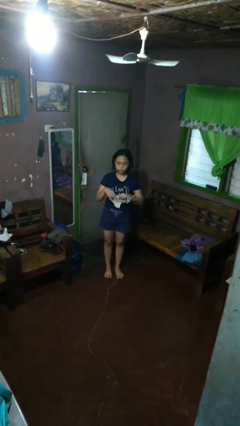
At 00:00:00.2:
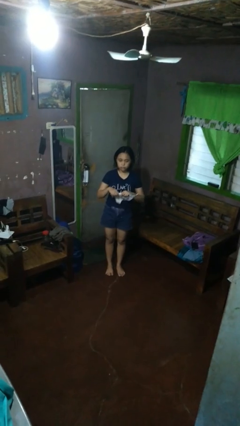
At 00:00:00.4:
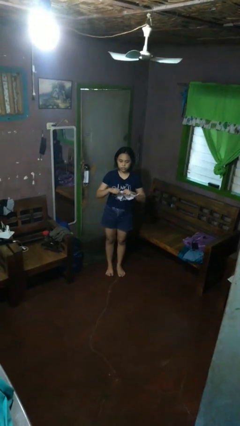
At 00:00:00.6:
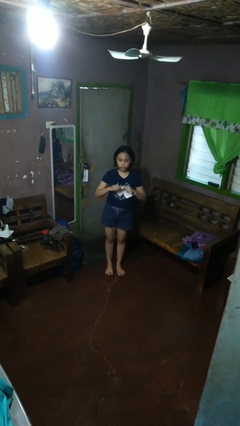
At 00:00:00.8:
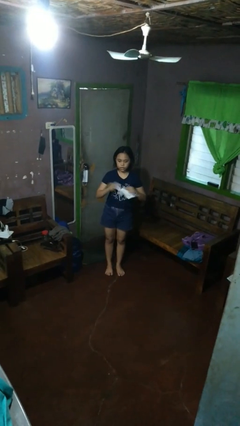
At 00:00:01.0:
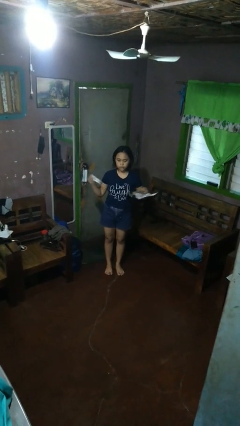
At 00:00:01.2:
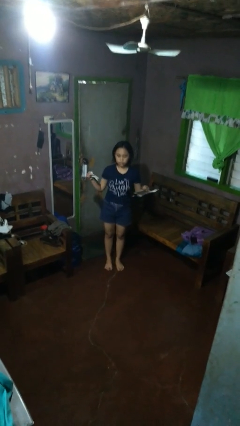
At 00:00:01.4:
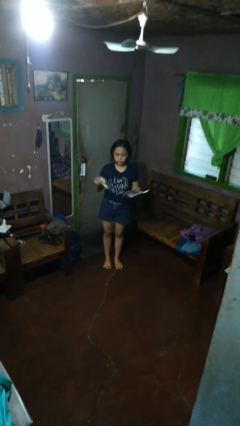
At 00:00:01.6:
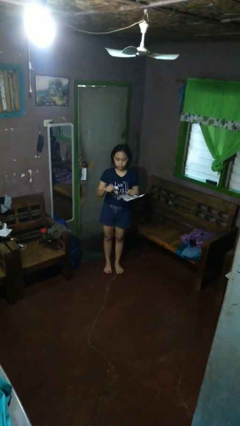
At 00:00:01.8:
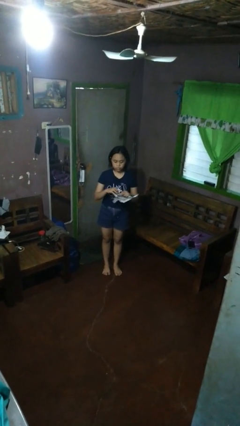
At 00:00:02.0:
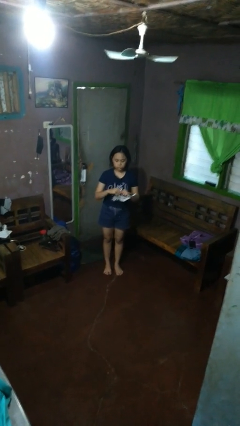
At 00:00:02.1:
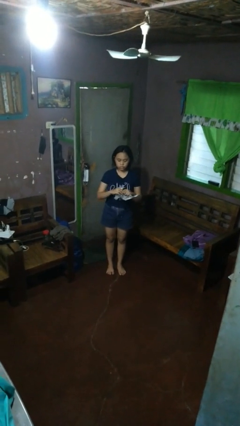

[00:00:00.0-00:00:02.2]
person tears paper

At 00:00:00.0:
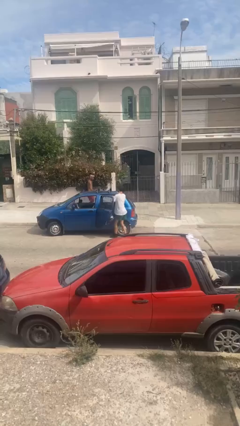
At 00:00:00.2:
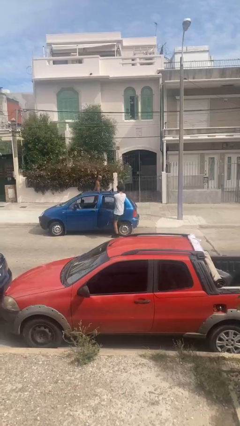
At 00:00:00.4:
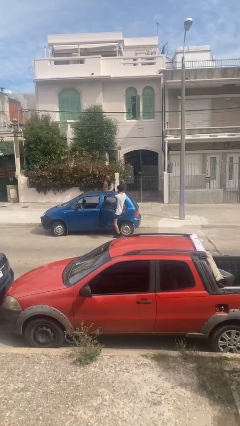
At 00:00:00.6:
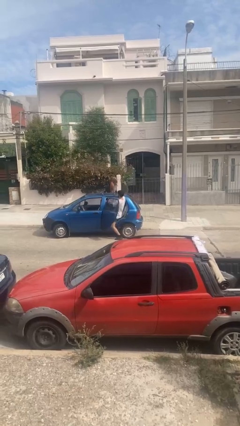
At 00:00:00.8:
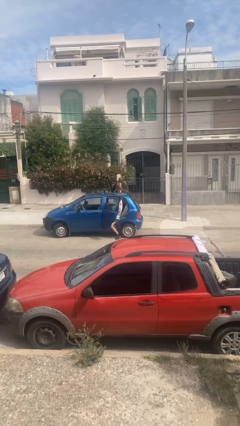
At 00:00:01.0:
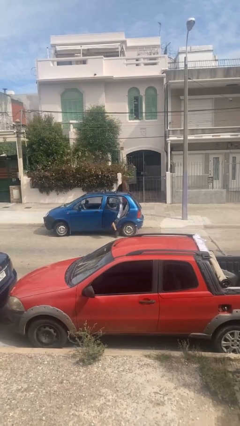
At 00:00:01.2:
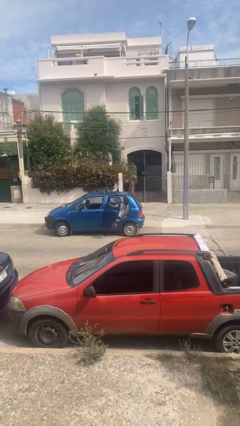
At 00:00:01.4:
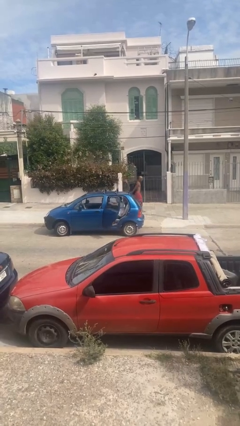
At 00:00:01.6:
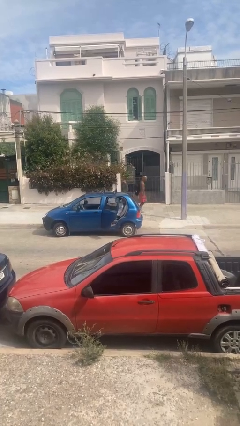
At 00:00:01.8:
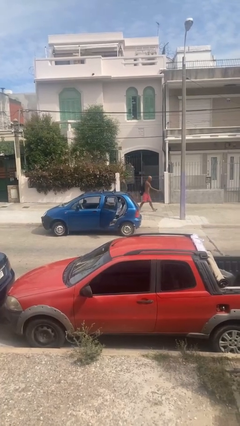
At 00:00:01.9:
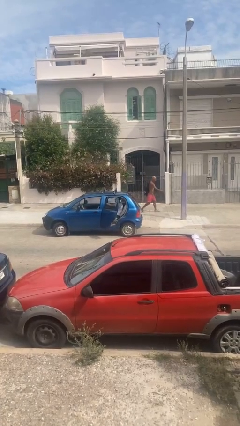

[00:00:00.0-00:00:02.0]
person enters car

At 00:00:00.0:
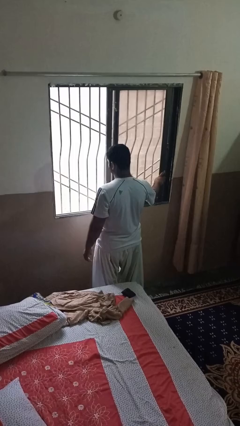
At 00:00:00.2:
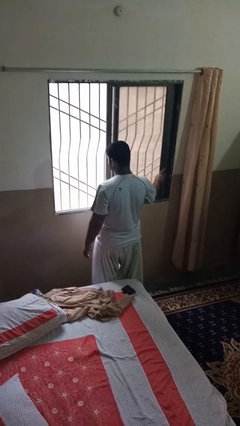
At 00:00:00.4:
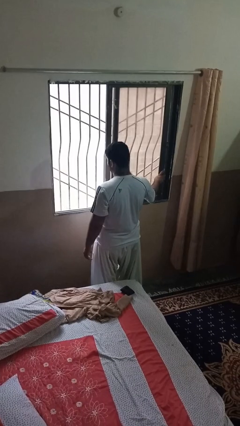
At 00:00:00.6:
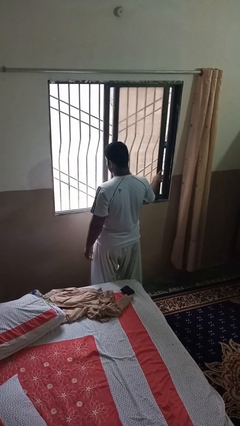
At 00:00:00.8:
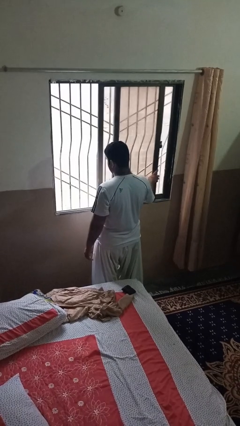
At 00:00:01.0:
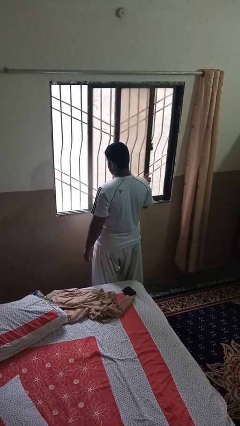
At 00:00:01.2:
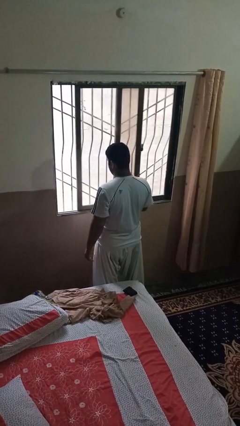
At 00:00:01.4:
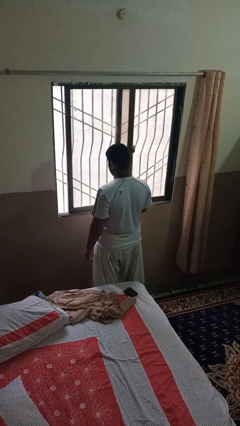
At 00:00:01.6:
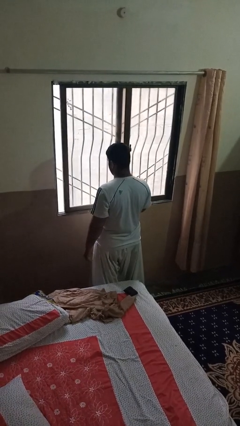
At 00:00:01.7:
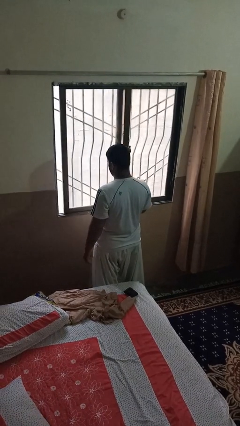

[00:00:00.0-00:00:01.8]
person closes home window

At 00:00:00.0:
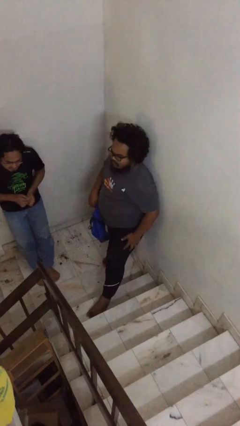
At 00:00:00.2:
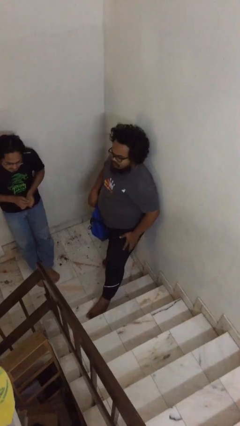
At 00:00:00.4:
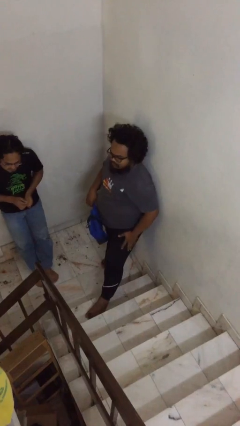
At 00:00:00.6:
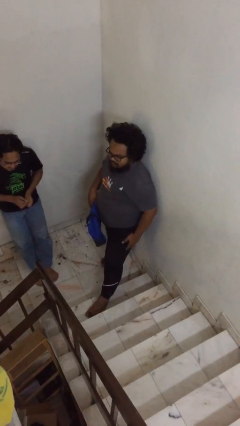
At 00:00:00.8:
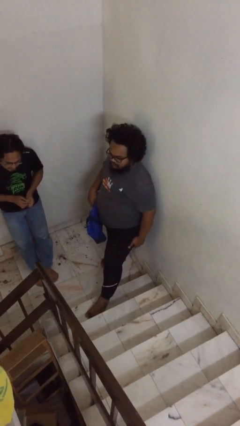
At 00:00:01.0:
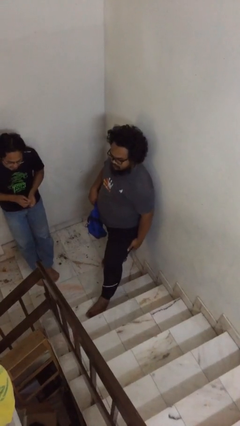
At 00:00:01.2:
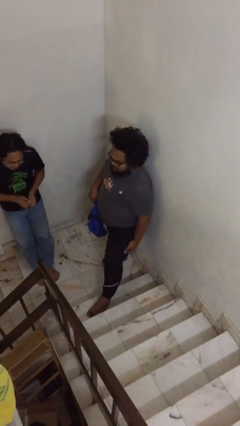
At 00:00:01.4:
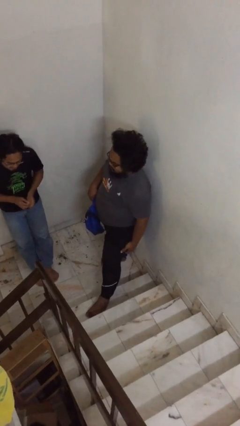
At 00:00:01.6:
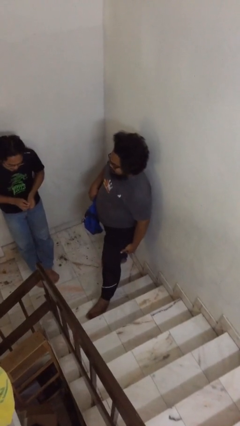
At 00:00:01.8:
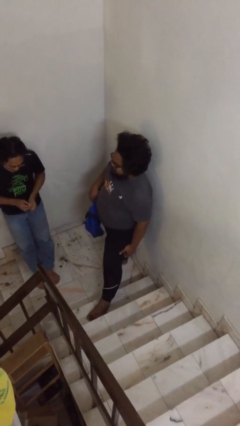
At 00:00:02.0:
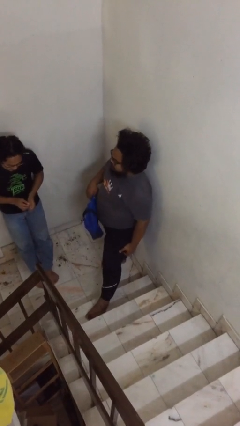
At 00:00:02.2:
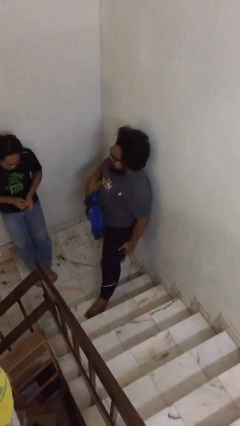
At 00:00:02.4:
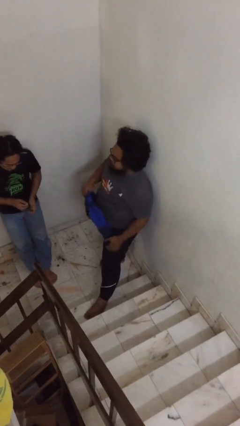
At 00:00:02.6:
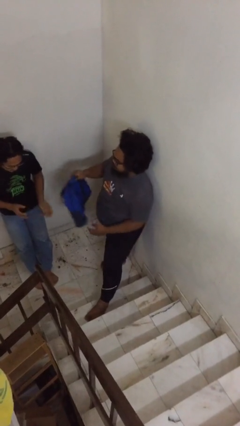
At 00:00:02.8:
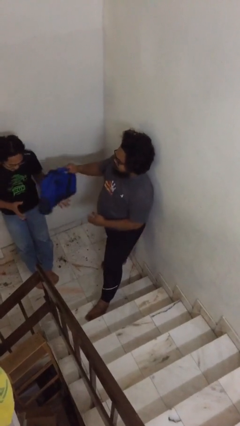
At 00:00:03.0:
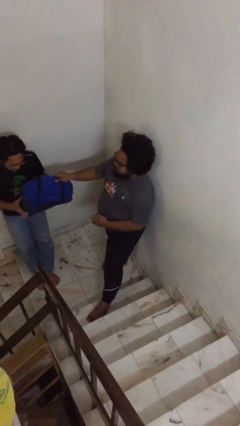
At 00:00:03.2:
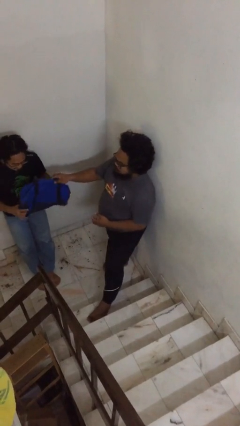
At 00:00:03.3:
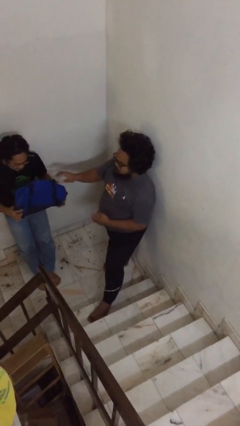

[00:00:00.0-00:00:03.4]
person transfers object to person

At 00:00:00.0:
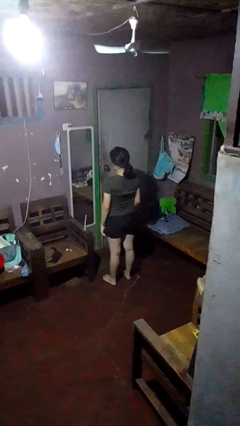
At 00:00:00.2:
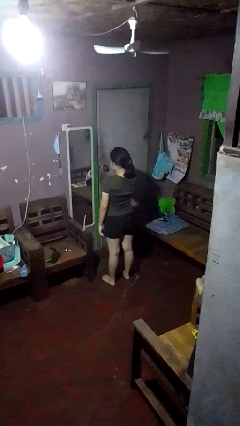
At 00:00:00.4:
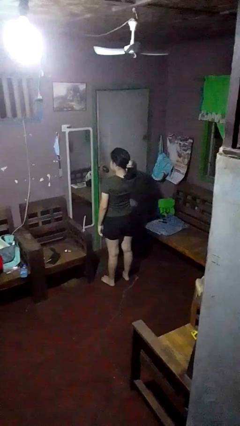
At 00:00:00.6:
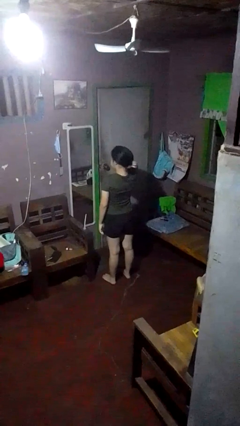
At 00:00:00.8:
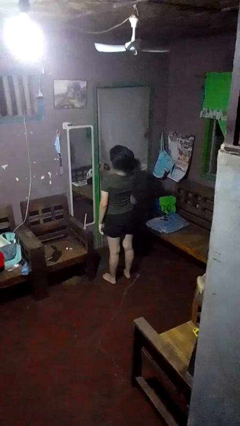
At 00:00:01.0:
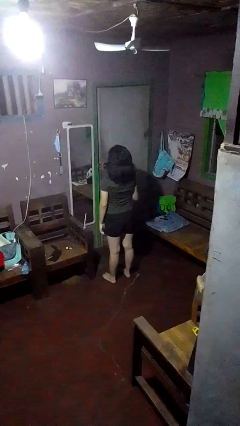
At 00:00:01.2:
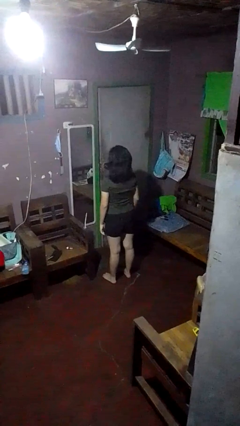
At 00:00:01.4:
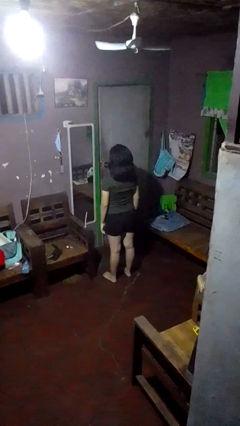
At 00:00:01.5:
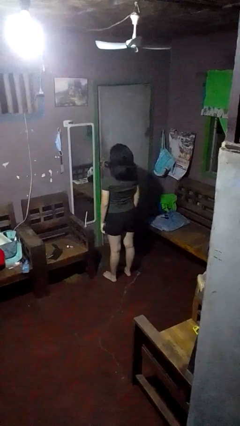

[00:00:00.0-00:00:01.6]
person takes off hairtie

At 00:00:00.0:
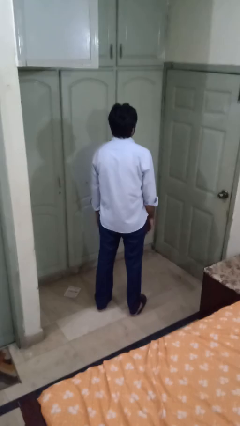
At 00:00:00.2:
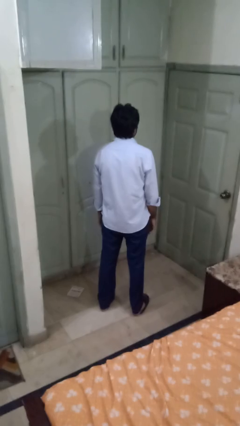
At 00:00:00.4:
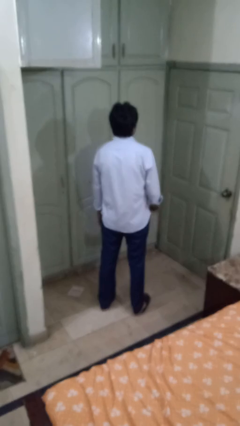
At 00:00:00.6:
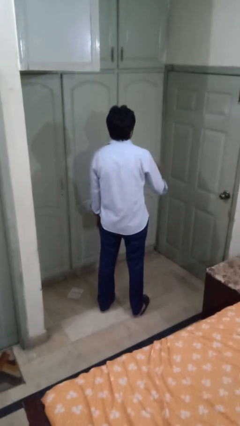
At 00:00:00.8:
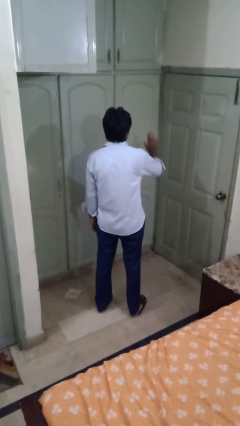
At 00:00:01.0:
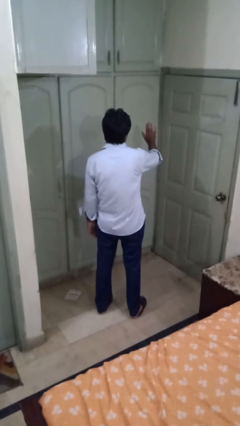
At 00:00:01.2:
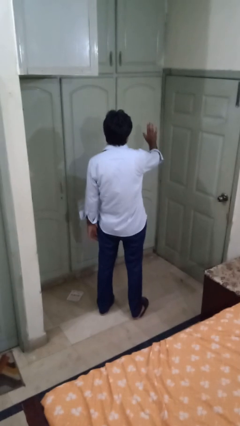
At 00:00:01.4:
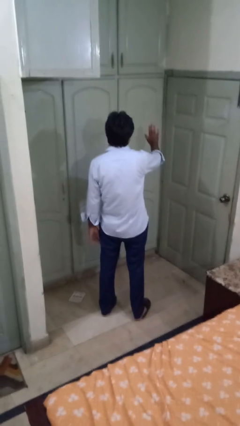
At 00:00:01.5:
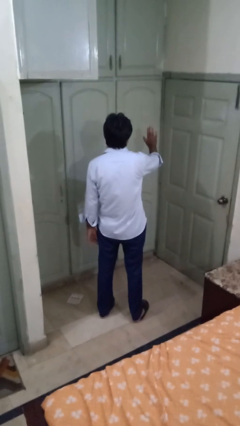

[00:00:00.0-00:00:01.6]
person gestures stop

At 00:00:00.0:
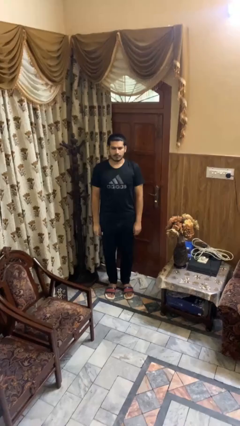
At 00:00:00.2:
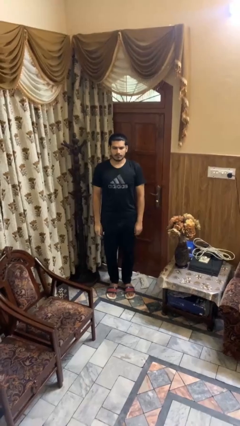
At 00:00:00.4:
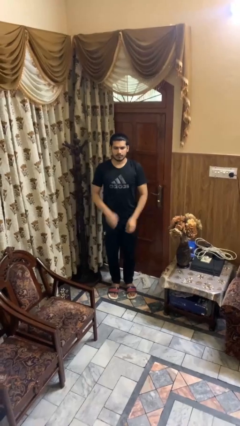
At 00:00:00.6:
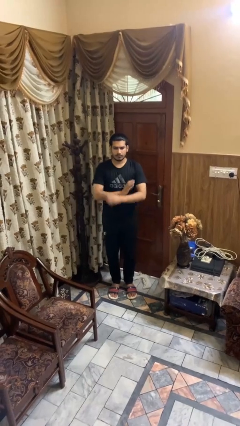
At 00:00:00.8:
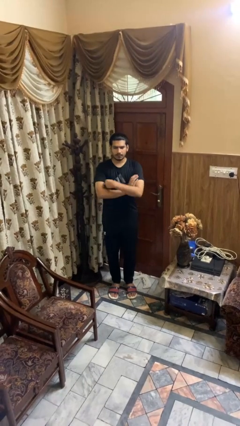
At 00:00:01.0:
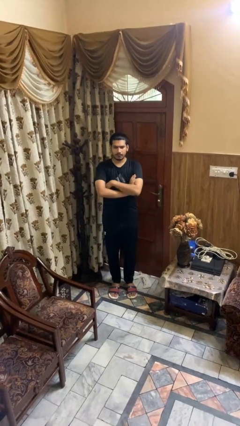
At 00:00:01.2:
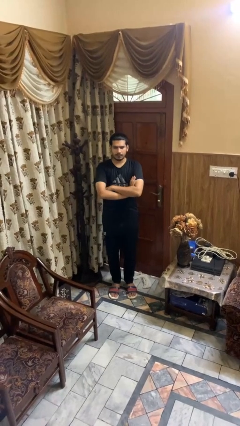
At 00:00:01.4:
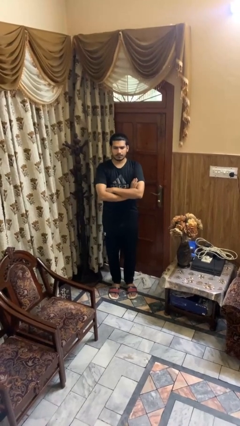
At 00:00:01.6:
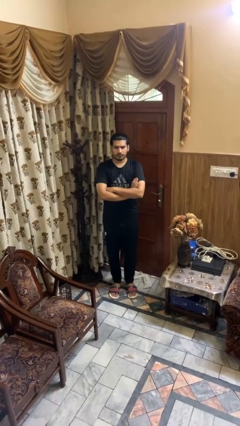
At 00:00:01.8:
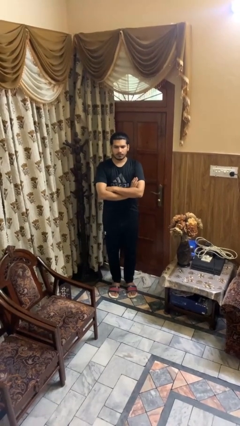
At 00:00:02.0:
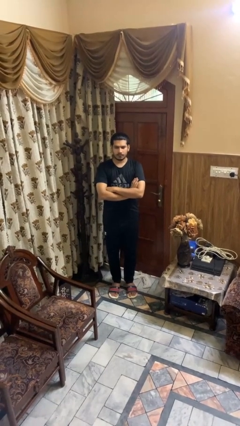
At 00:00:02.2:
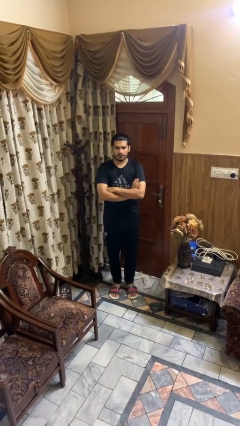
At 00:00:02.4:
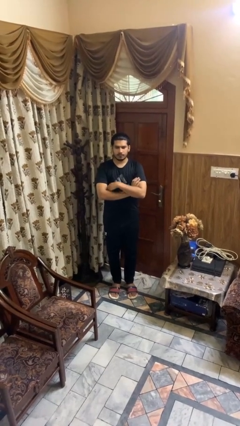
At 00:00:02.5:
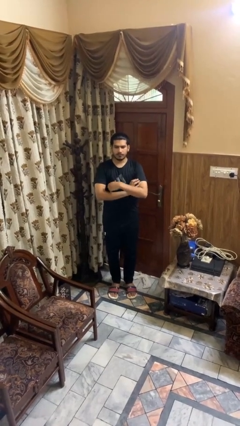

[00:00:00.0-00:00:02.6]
person crosses arms

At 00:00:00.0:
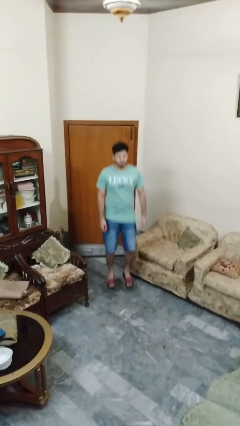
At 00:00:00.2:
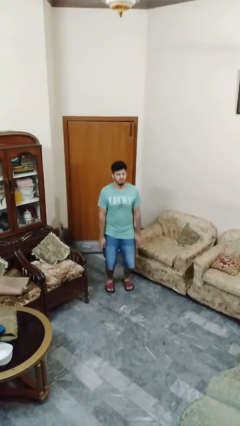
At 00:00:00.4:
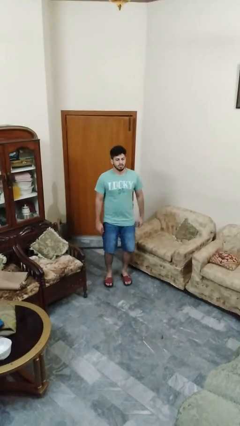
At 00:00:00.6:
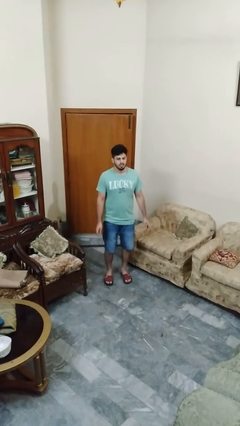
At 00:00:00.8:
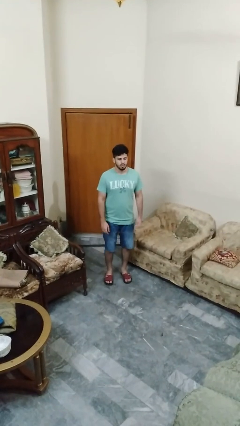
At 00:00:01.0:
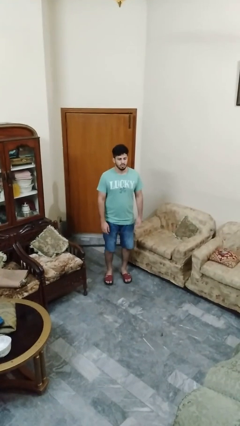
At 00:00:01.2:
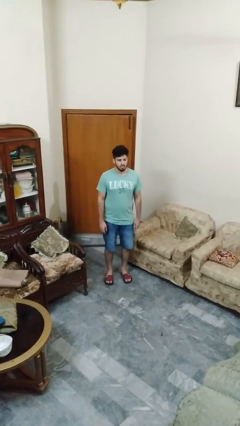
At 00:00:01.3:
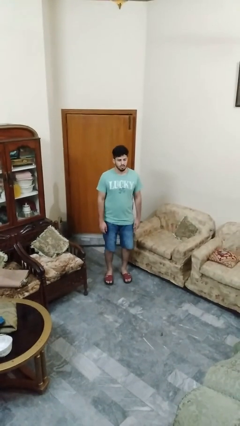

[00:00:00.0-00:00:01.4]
person jumps
